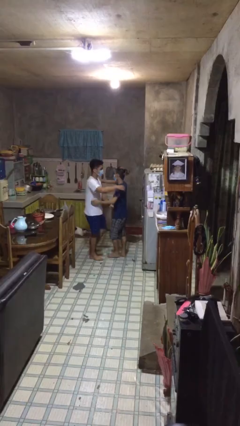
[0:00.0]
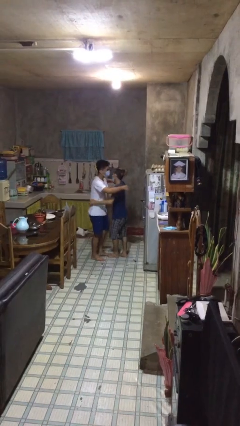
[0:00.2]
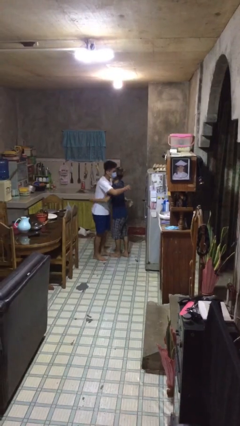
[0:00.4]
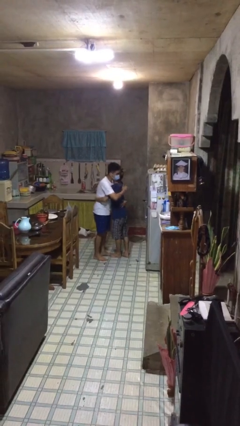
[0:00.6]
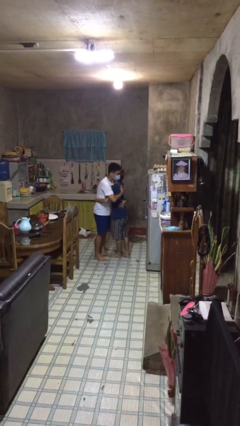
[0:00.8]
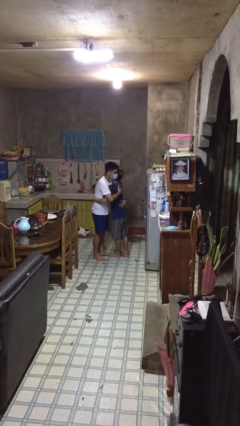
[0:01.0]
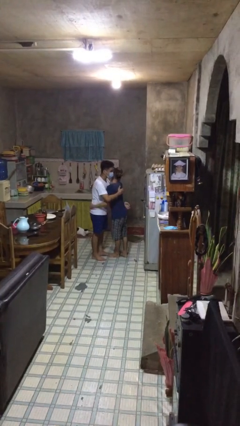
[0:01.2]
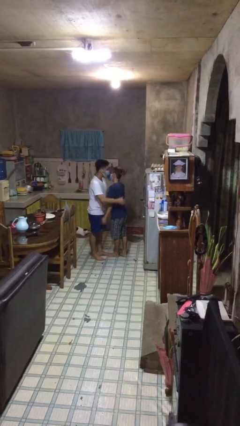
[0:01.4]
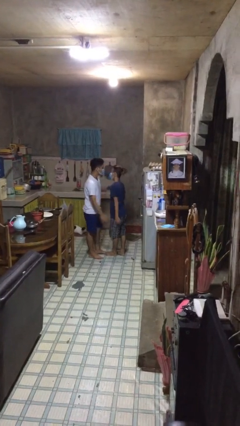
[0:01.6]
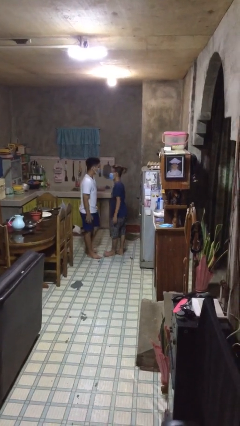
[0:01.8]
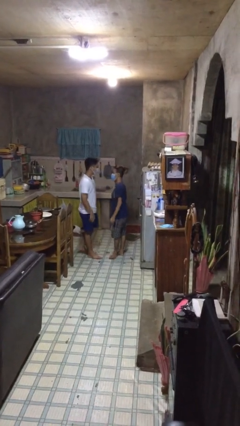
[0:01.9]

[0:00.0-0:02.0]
person embraces person

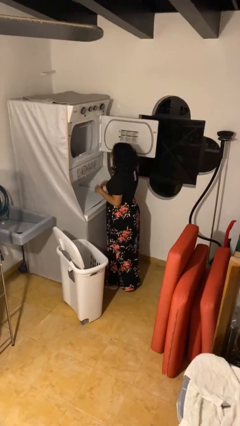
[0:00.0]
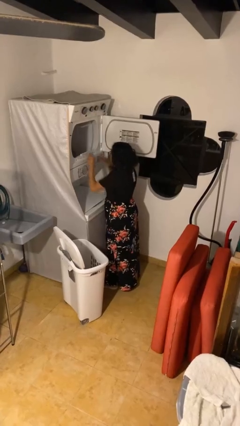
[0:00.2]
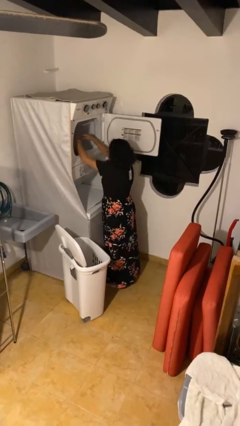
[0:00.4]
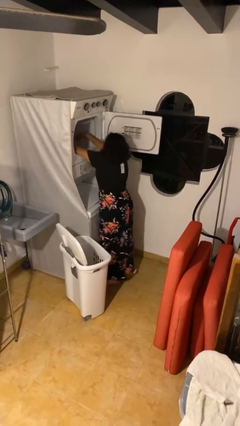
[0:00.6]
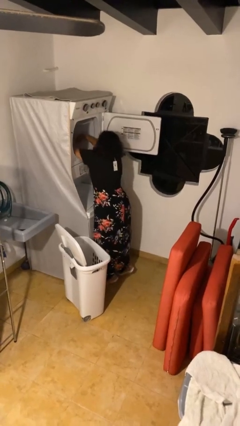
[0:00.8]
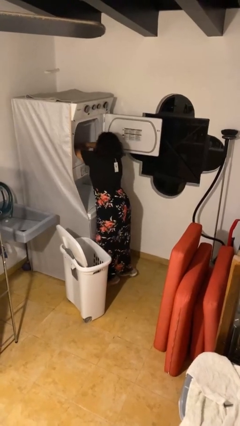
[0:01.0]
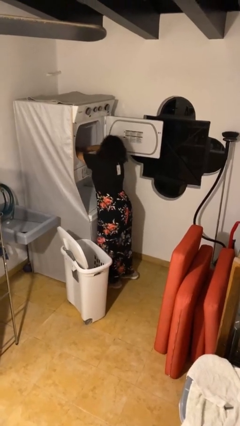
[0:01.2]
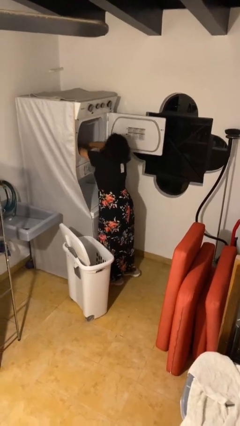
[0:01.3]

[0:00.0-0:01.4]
person unloads dryer

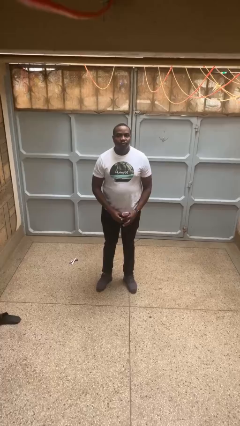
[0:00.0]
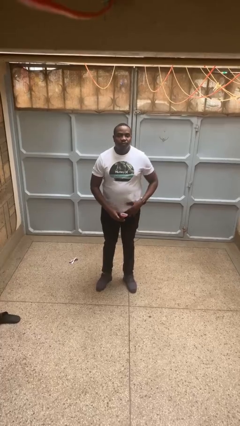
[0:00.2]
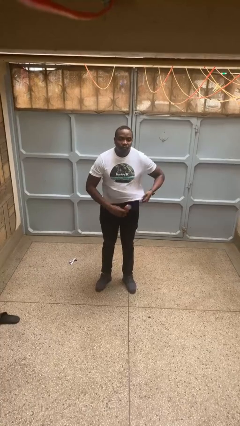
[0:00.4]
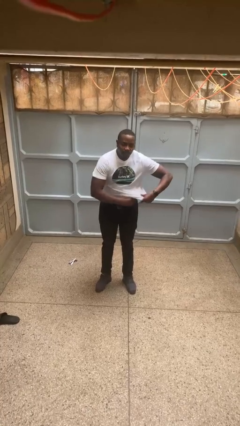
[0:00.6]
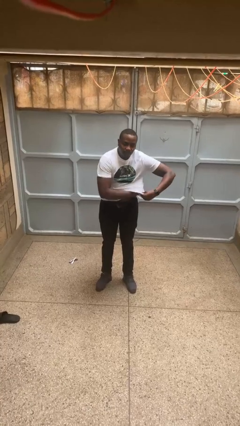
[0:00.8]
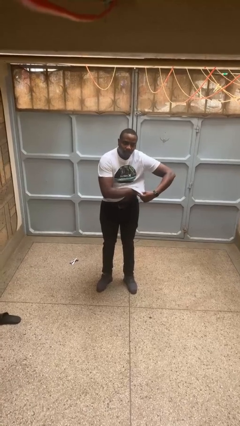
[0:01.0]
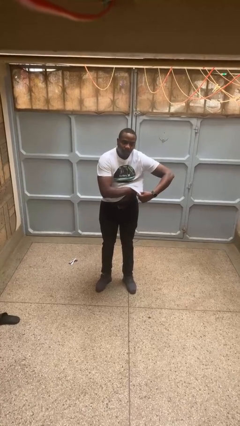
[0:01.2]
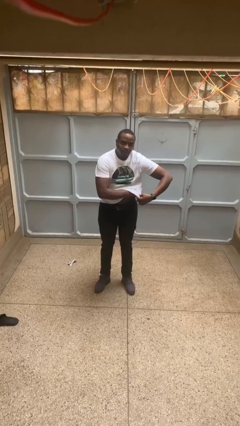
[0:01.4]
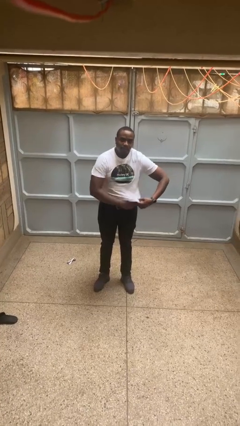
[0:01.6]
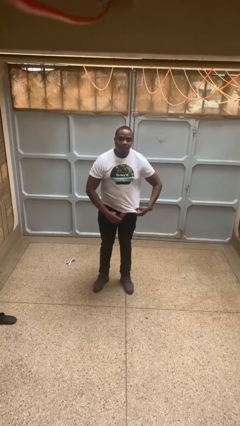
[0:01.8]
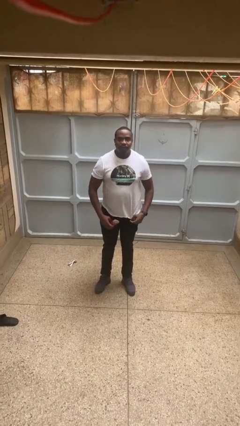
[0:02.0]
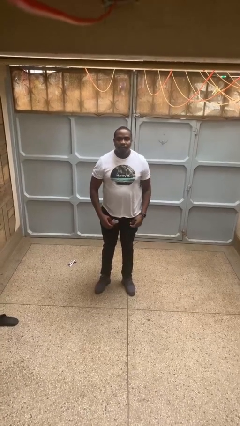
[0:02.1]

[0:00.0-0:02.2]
person applies deodorant

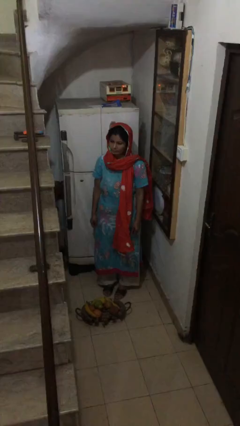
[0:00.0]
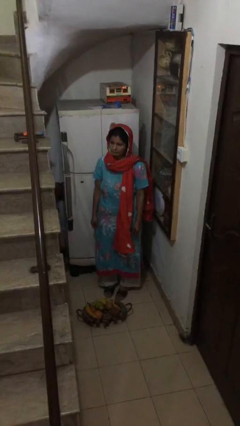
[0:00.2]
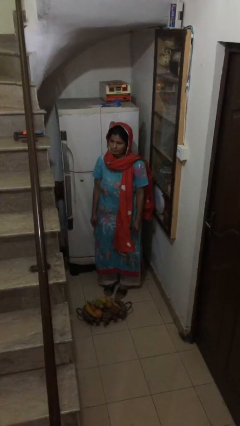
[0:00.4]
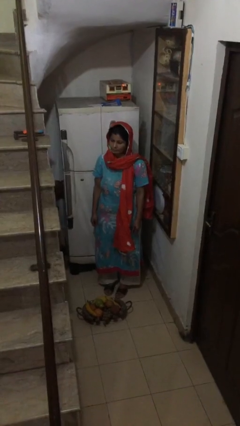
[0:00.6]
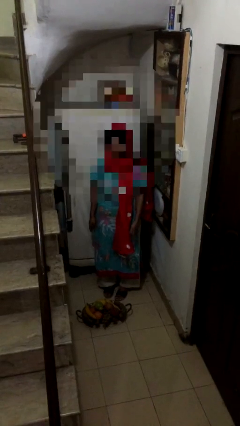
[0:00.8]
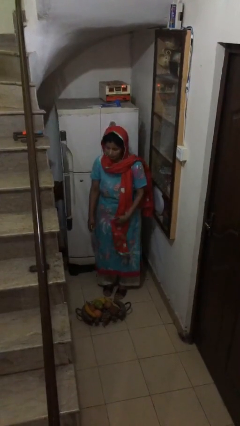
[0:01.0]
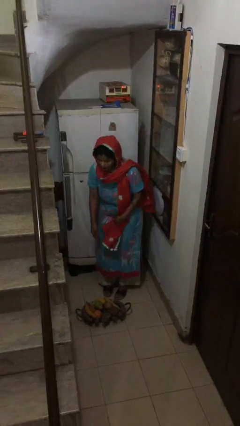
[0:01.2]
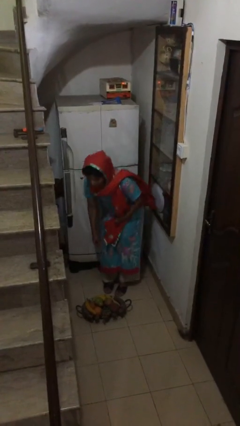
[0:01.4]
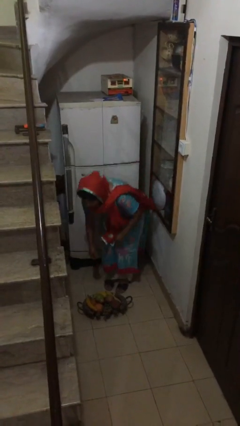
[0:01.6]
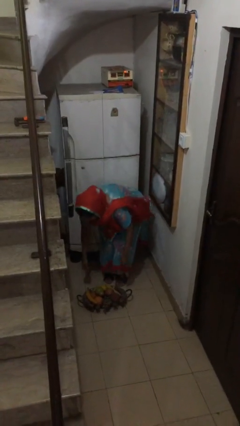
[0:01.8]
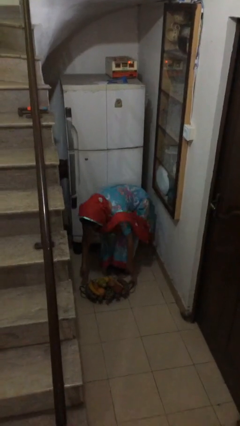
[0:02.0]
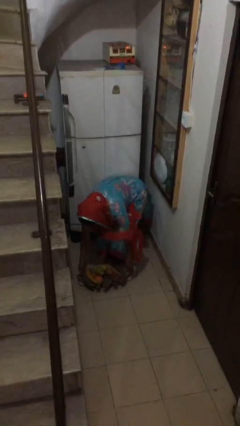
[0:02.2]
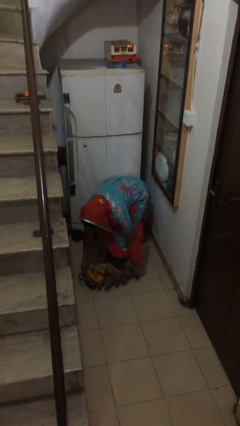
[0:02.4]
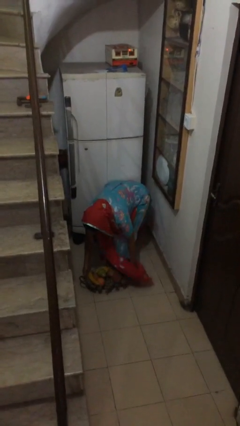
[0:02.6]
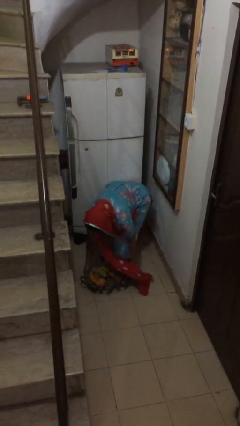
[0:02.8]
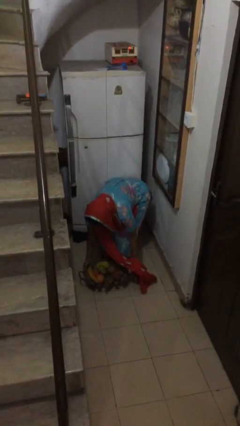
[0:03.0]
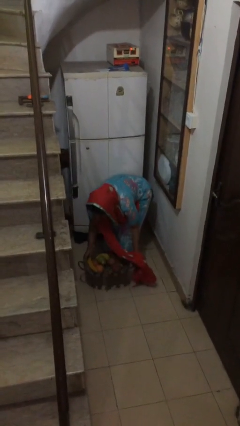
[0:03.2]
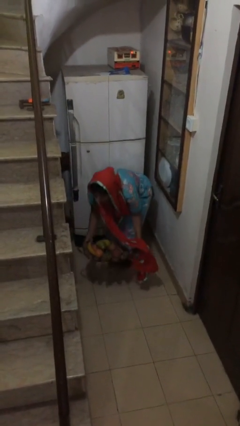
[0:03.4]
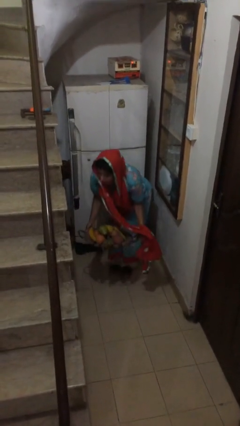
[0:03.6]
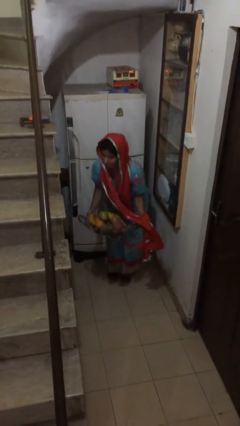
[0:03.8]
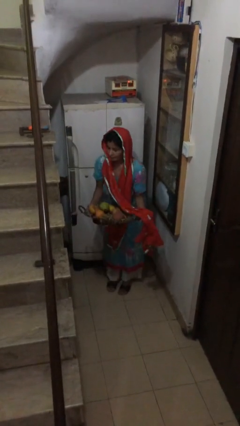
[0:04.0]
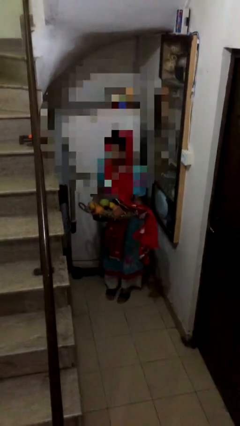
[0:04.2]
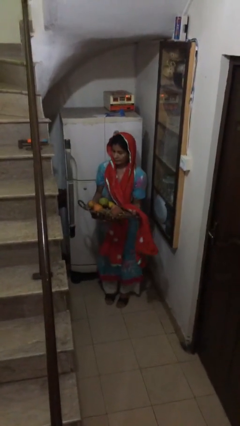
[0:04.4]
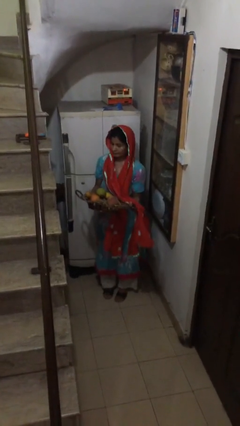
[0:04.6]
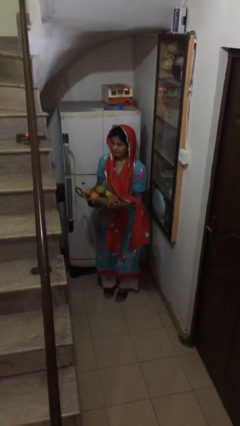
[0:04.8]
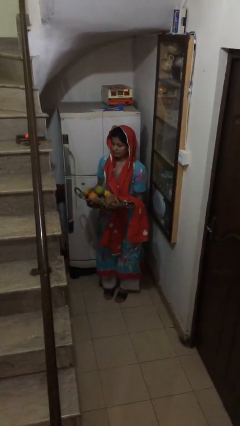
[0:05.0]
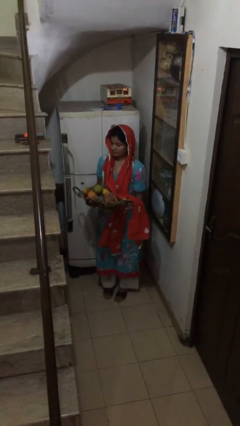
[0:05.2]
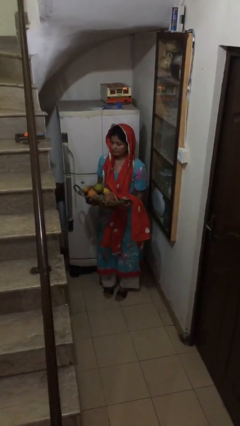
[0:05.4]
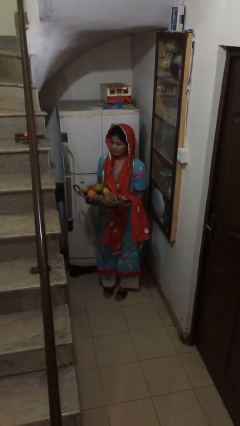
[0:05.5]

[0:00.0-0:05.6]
person picks up object from floor

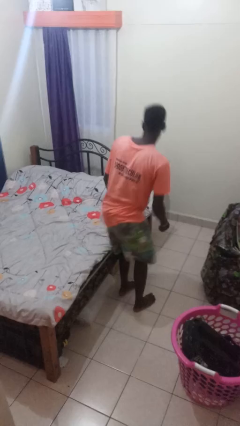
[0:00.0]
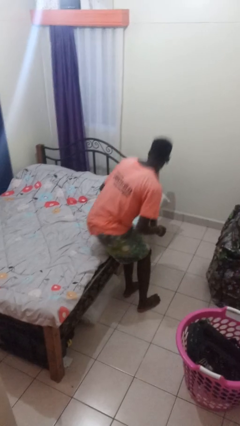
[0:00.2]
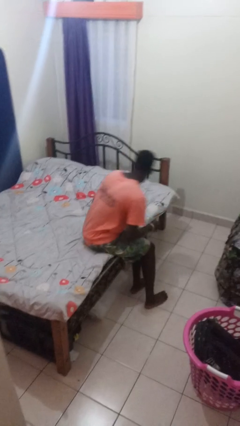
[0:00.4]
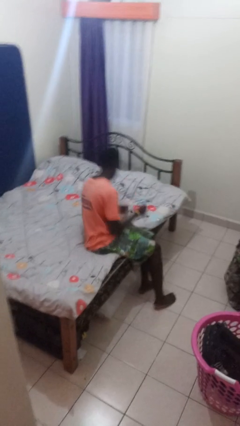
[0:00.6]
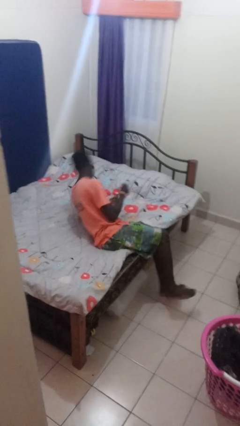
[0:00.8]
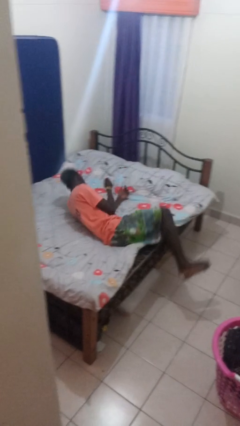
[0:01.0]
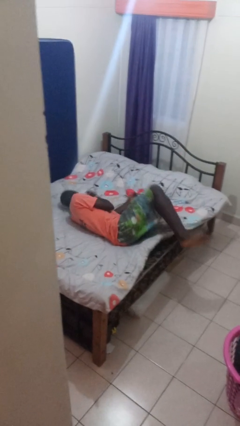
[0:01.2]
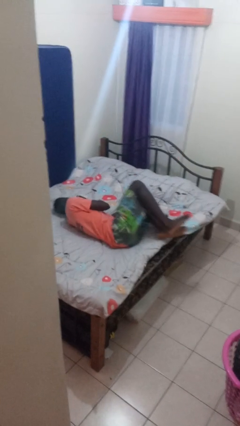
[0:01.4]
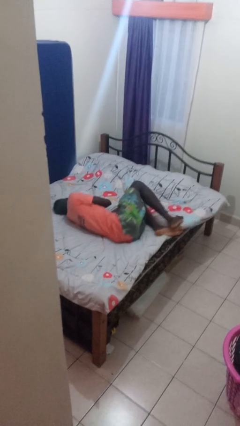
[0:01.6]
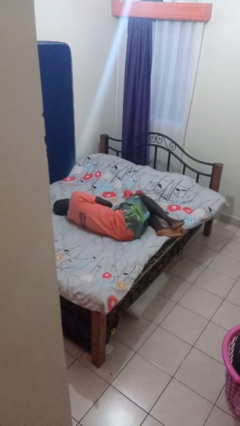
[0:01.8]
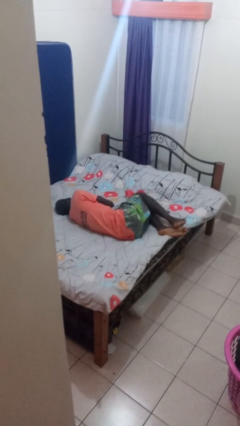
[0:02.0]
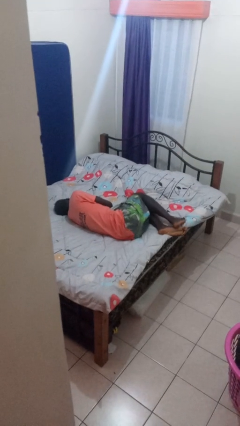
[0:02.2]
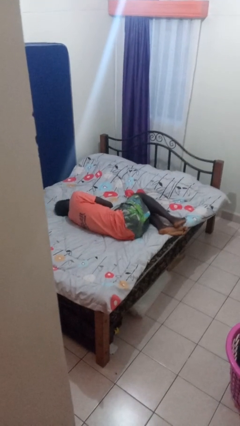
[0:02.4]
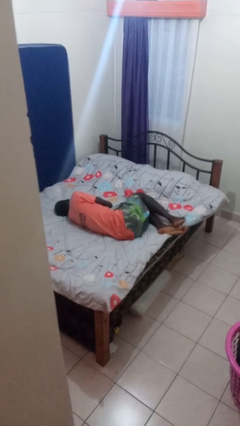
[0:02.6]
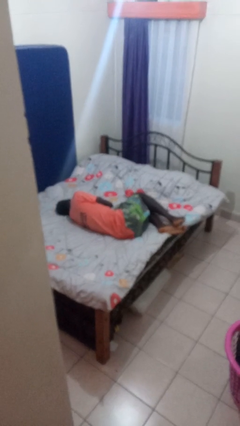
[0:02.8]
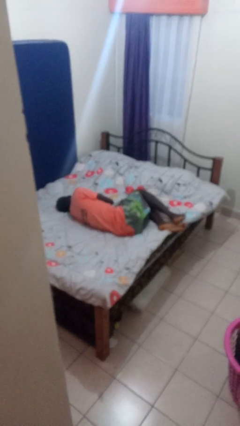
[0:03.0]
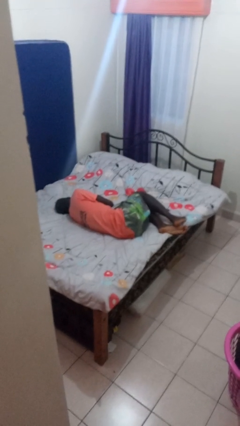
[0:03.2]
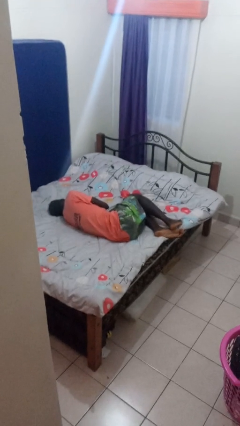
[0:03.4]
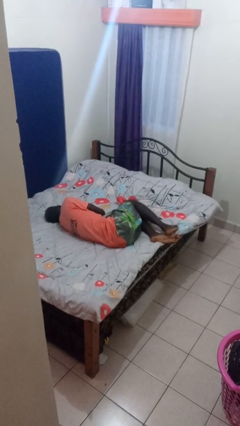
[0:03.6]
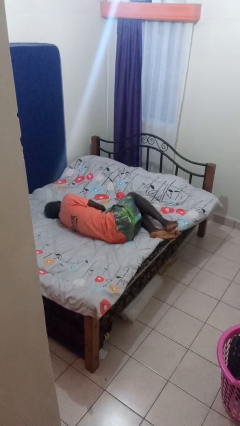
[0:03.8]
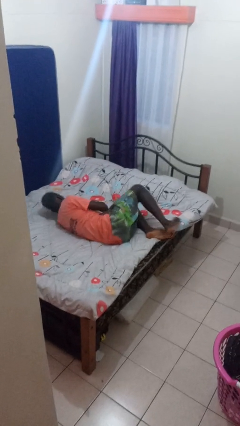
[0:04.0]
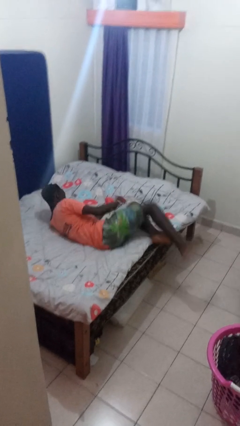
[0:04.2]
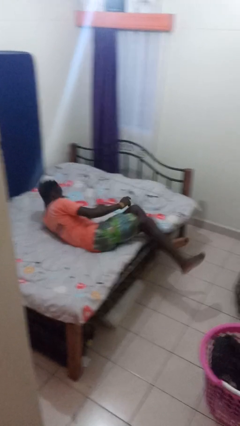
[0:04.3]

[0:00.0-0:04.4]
person lies down on bed

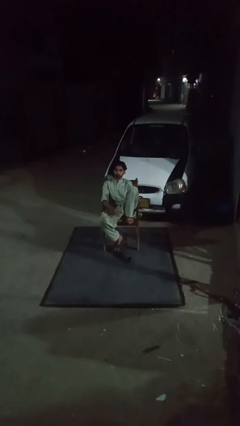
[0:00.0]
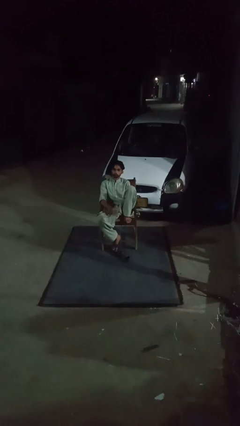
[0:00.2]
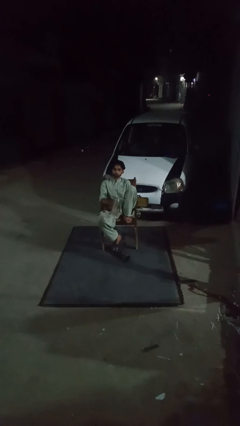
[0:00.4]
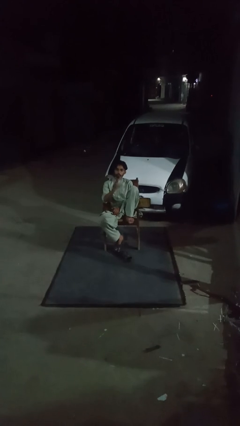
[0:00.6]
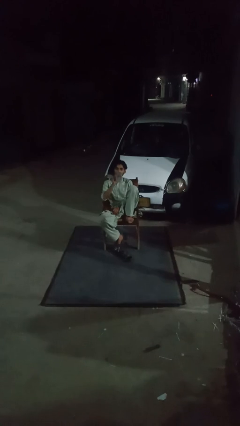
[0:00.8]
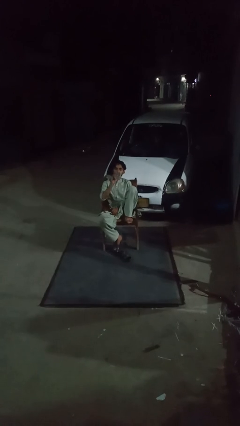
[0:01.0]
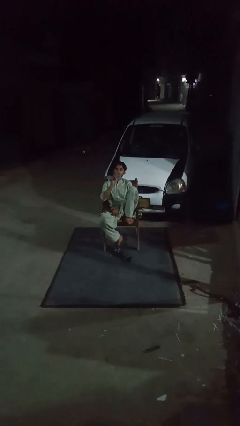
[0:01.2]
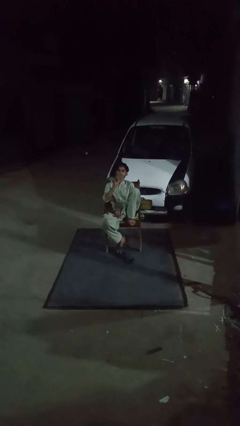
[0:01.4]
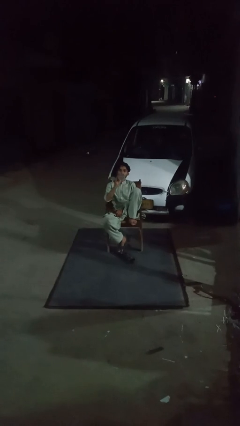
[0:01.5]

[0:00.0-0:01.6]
person drinks from bottle

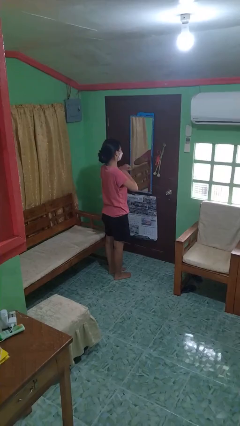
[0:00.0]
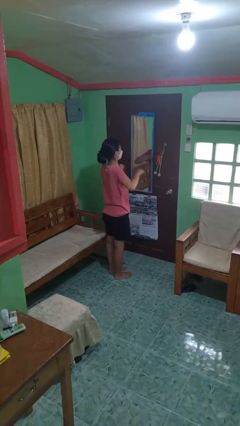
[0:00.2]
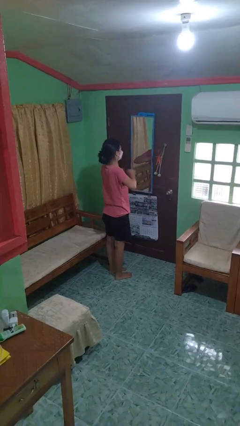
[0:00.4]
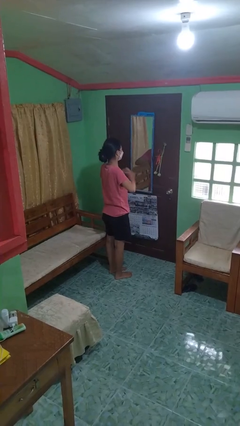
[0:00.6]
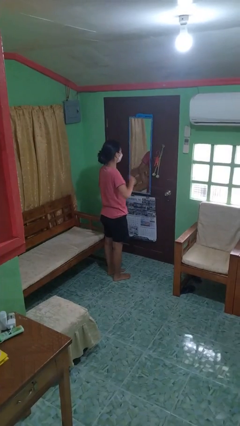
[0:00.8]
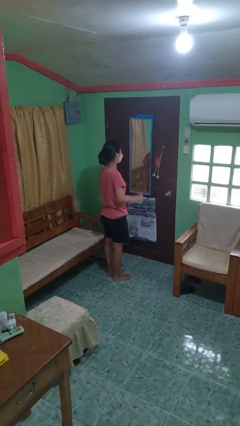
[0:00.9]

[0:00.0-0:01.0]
person drums on chest
